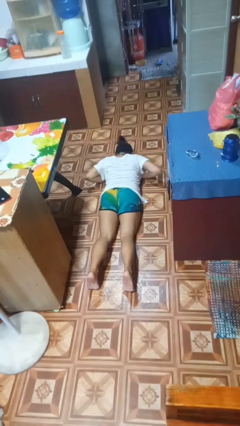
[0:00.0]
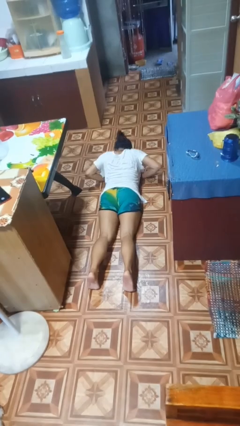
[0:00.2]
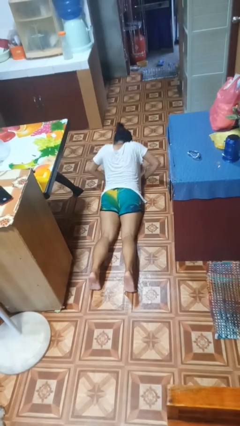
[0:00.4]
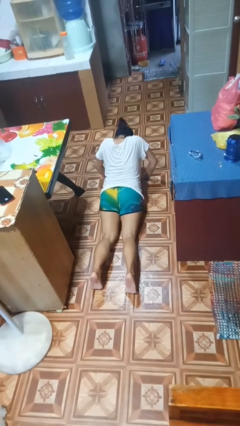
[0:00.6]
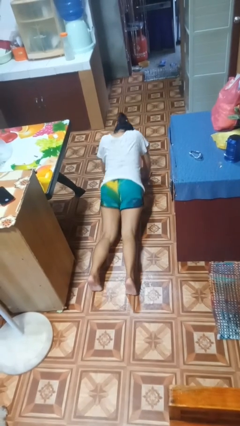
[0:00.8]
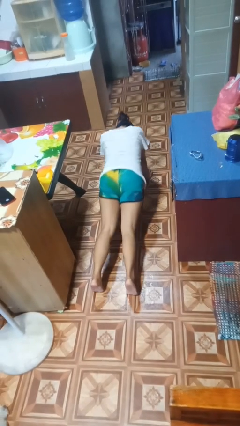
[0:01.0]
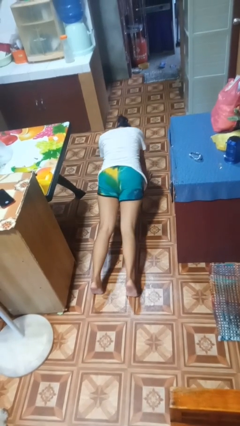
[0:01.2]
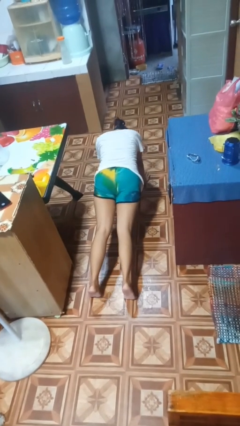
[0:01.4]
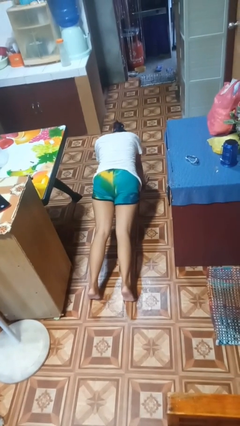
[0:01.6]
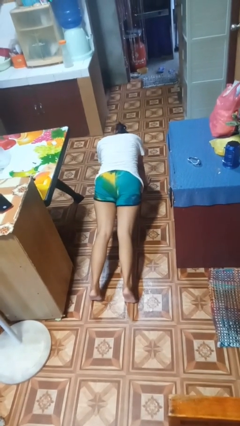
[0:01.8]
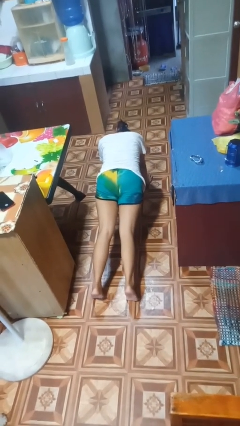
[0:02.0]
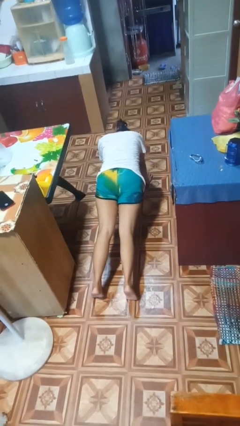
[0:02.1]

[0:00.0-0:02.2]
person exercises with pushup

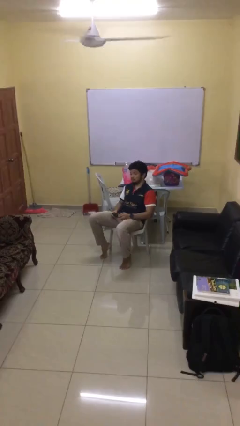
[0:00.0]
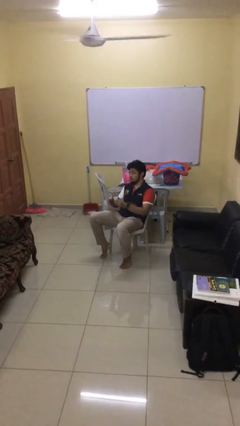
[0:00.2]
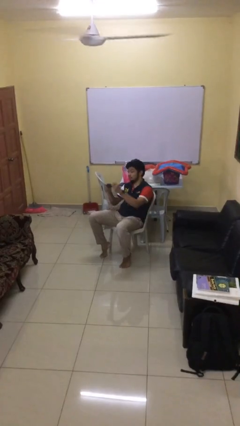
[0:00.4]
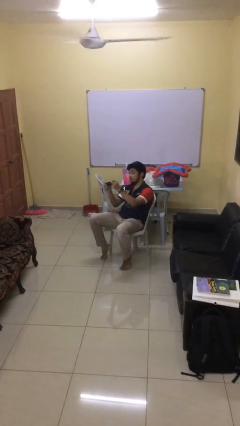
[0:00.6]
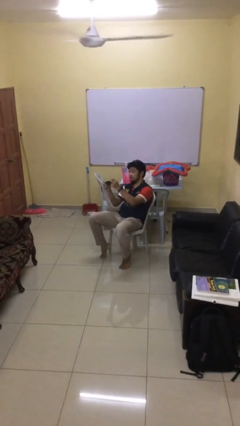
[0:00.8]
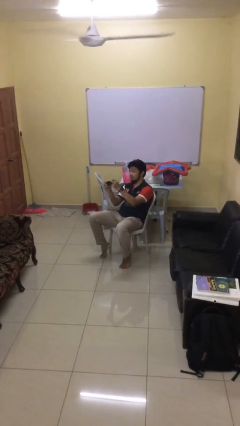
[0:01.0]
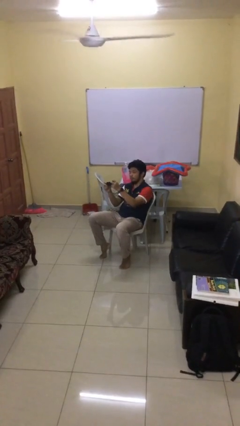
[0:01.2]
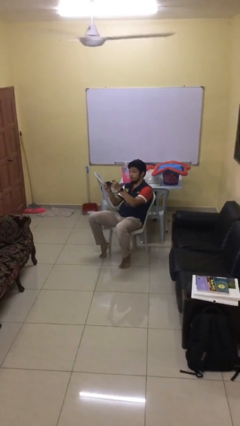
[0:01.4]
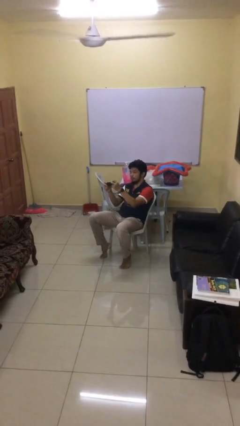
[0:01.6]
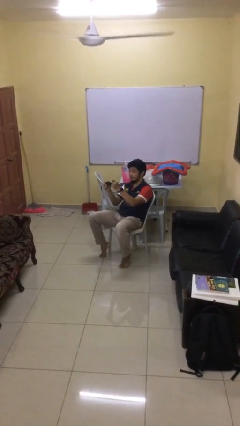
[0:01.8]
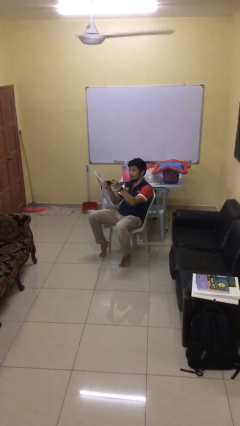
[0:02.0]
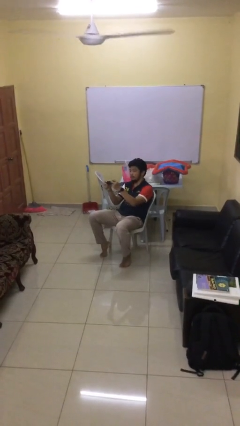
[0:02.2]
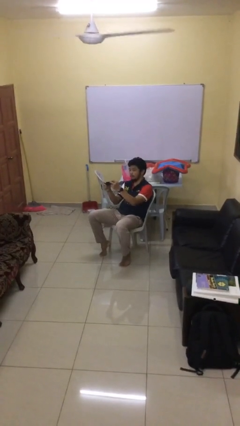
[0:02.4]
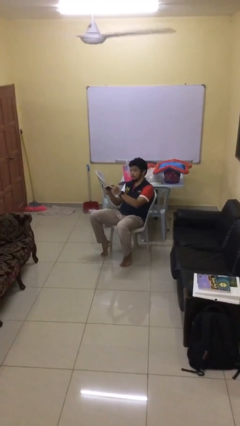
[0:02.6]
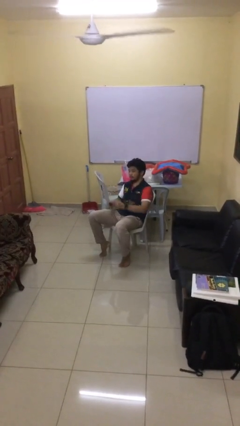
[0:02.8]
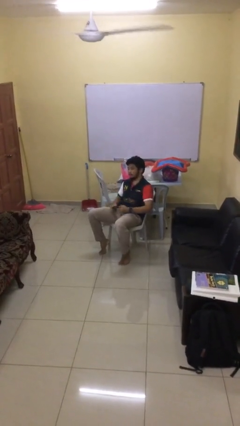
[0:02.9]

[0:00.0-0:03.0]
person interacts with handheld game

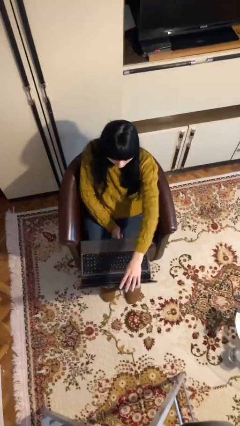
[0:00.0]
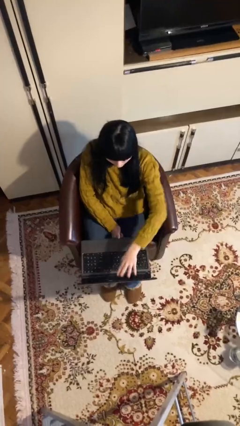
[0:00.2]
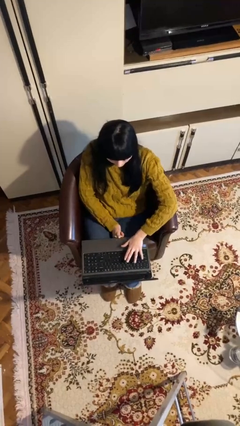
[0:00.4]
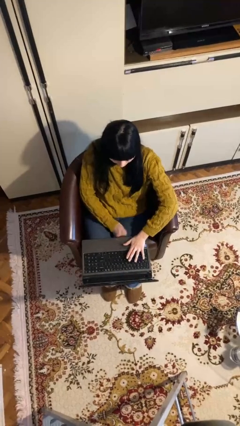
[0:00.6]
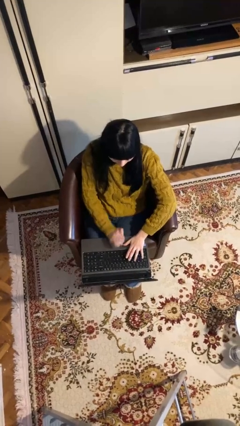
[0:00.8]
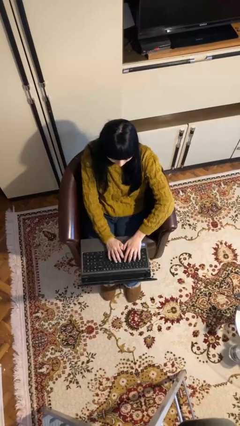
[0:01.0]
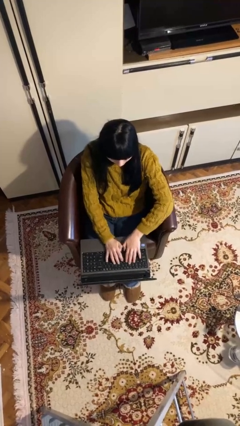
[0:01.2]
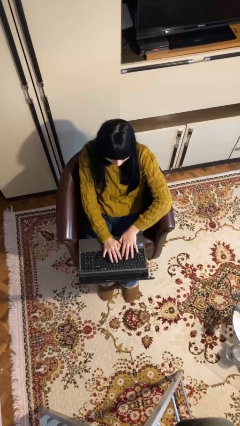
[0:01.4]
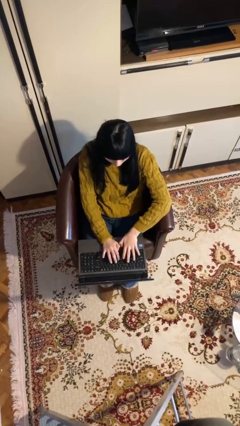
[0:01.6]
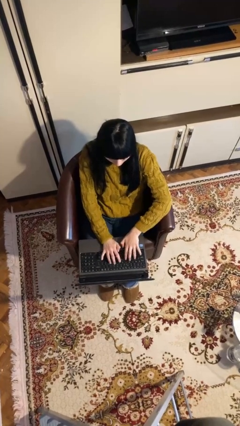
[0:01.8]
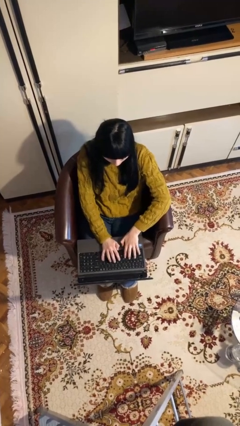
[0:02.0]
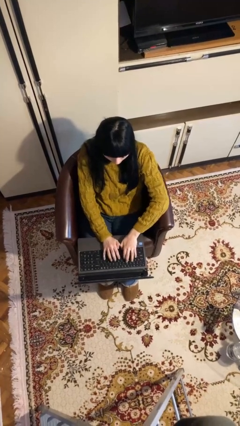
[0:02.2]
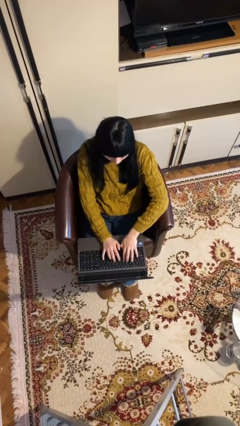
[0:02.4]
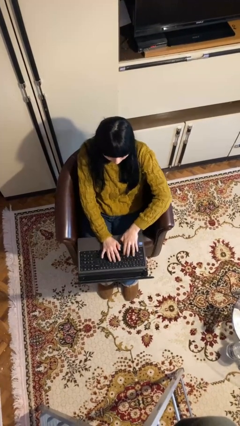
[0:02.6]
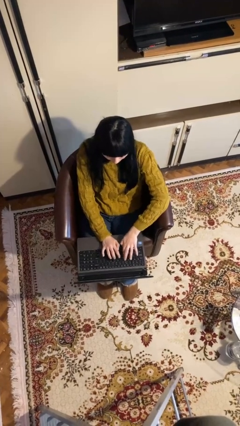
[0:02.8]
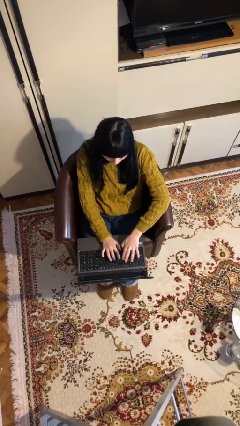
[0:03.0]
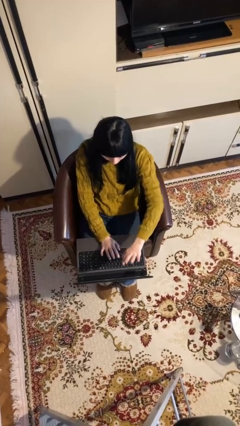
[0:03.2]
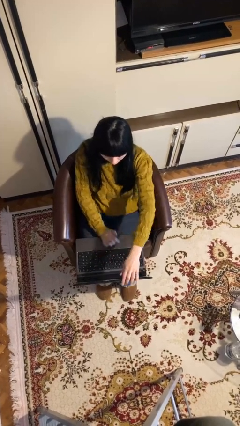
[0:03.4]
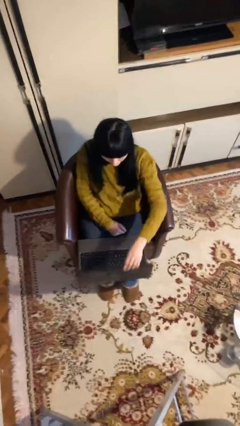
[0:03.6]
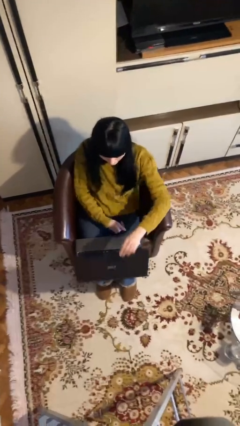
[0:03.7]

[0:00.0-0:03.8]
person interacts with laptop

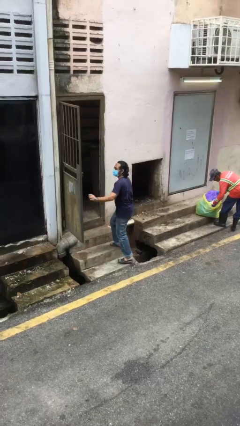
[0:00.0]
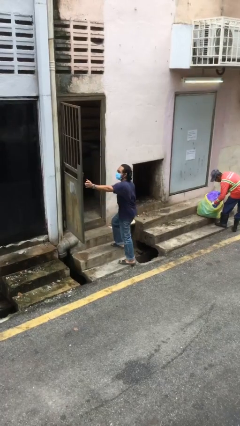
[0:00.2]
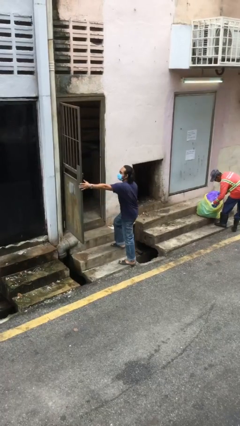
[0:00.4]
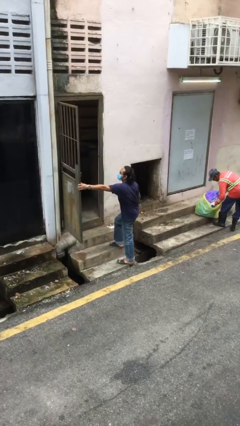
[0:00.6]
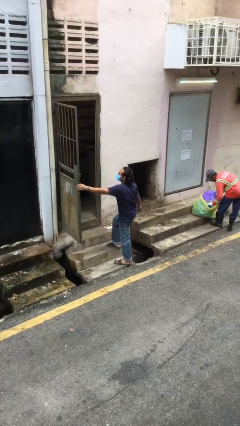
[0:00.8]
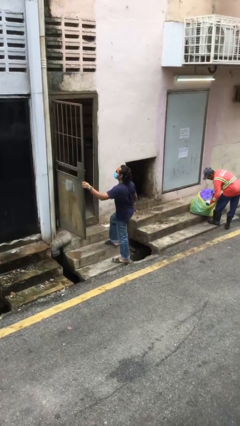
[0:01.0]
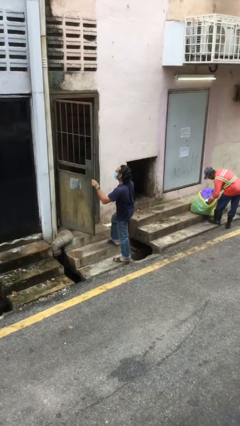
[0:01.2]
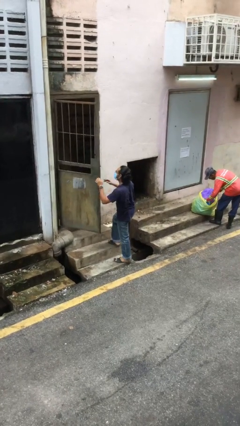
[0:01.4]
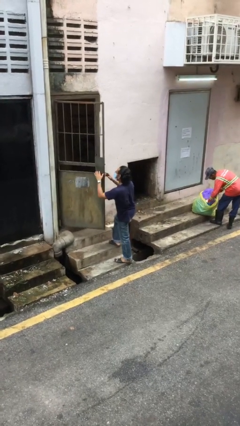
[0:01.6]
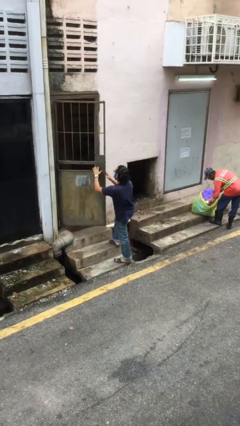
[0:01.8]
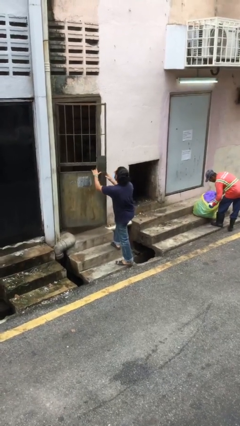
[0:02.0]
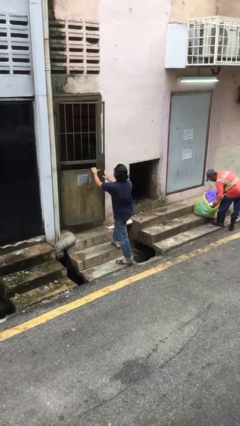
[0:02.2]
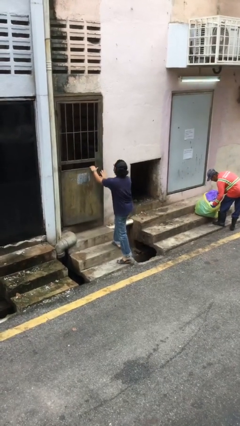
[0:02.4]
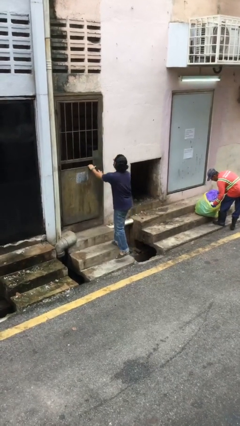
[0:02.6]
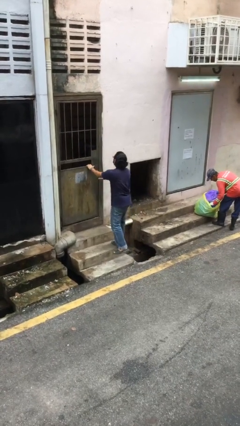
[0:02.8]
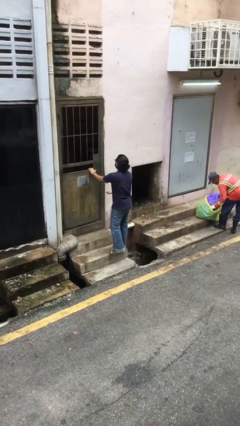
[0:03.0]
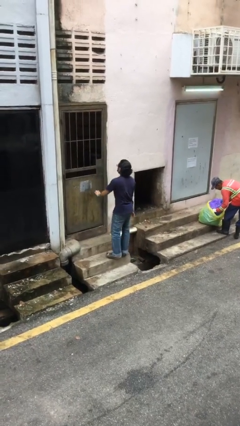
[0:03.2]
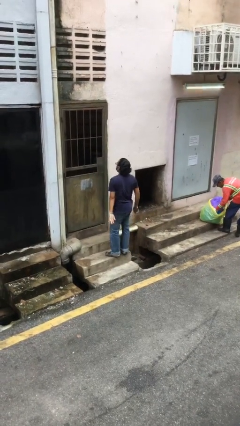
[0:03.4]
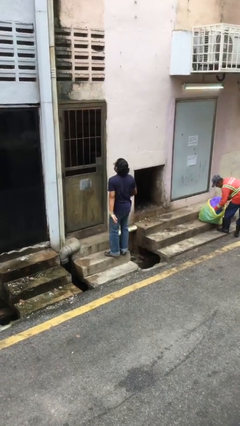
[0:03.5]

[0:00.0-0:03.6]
person closes facility door

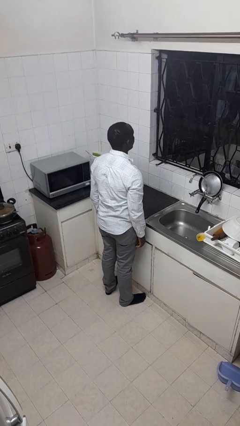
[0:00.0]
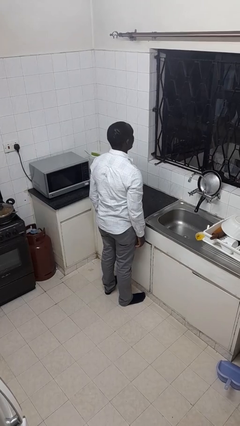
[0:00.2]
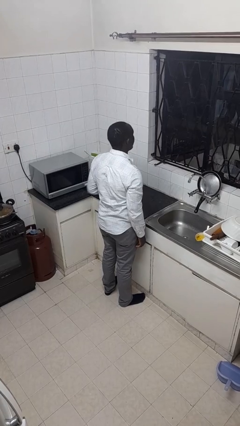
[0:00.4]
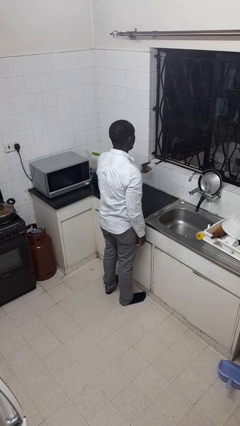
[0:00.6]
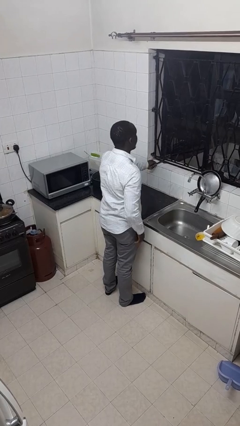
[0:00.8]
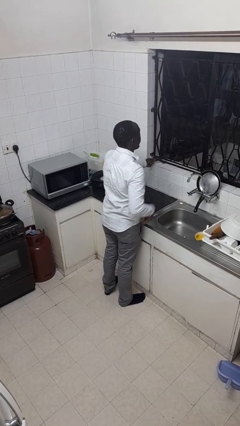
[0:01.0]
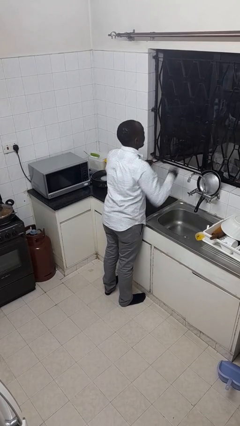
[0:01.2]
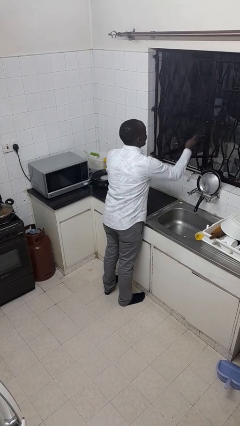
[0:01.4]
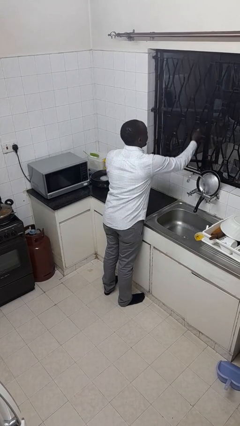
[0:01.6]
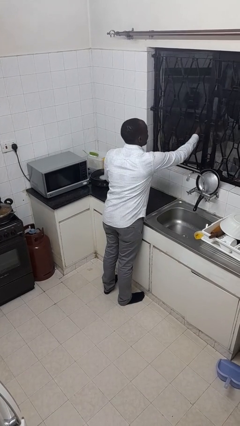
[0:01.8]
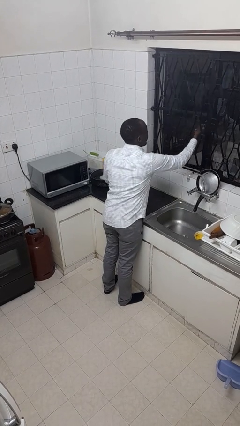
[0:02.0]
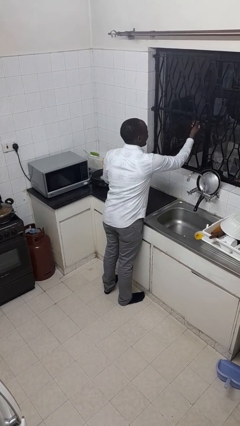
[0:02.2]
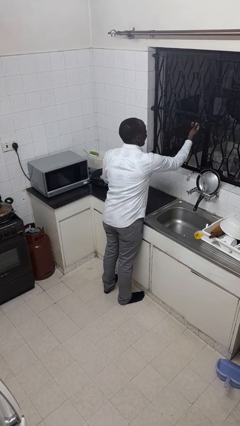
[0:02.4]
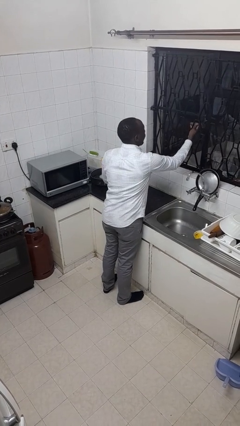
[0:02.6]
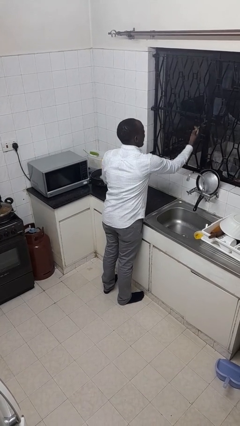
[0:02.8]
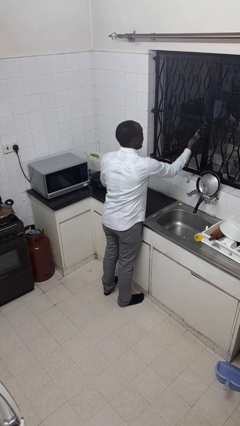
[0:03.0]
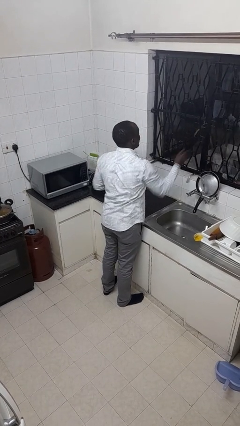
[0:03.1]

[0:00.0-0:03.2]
person closes home window

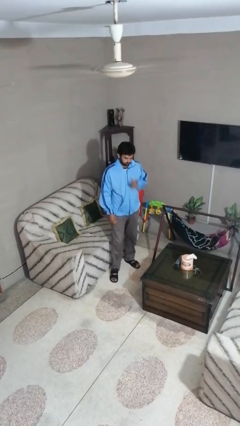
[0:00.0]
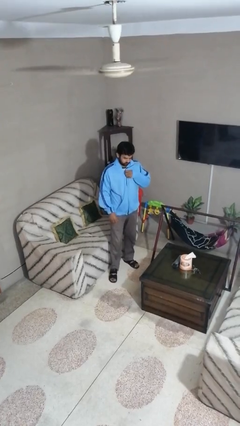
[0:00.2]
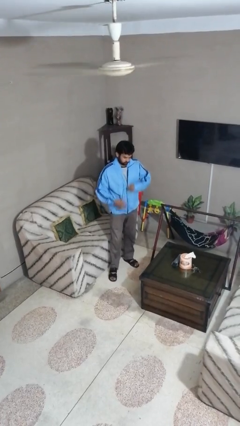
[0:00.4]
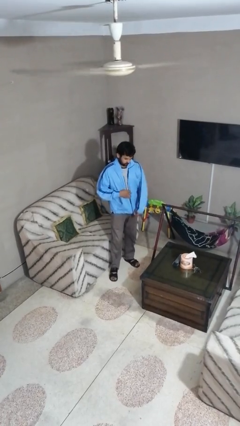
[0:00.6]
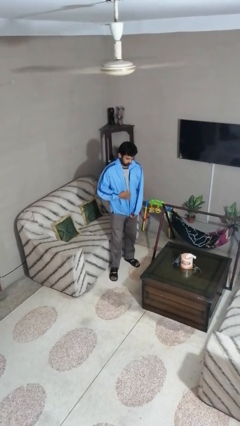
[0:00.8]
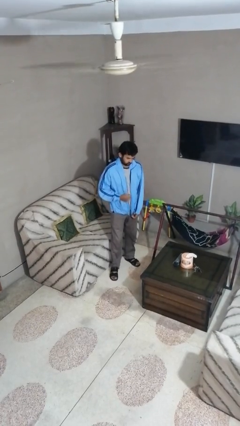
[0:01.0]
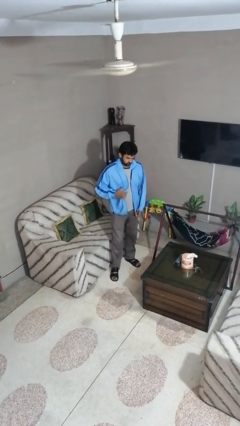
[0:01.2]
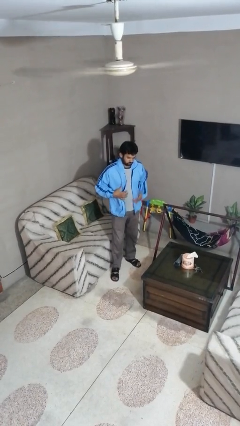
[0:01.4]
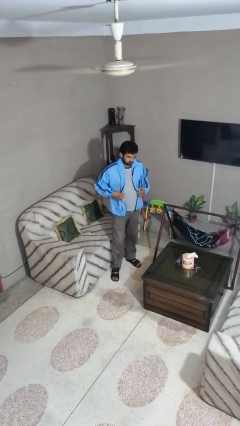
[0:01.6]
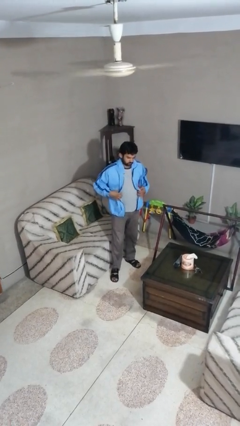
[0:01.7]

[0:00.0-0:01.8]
person unzips jacket

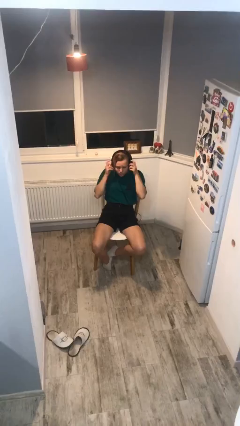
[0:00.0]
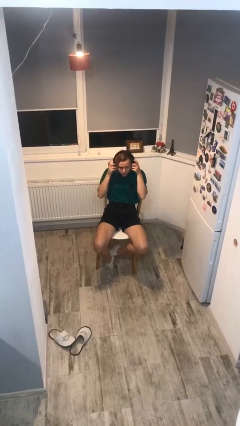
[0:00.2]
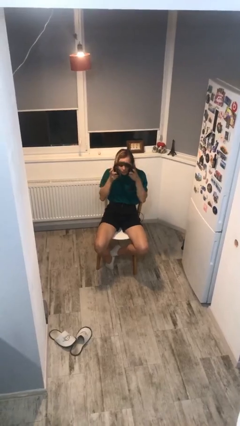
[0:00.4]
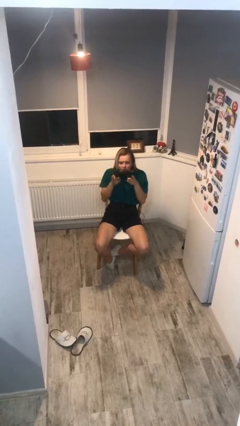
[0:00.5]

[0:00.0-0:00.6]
person takes off headphones
